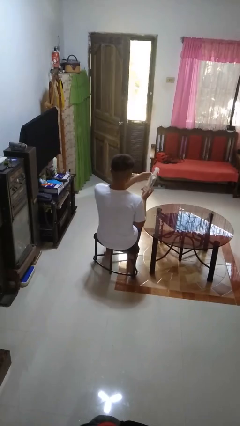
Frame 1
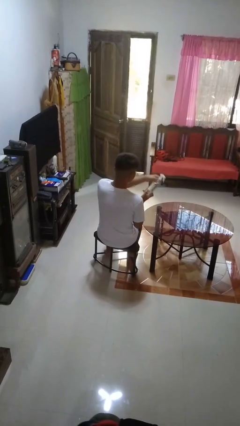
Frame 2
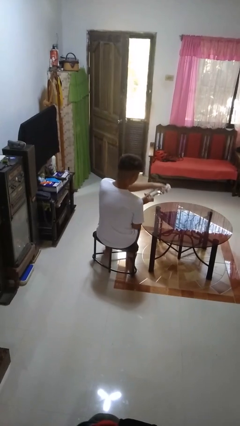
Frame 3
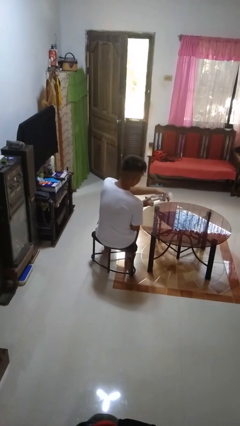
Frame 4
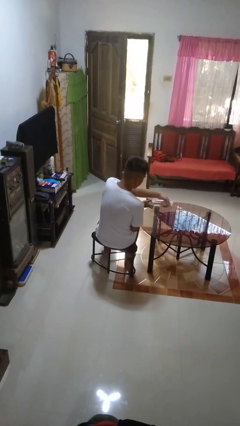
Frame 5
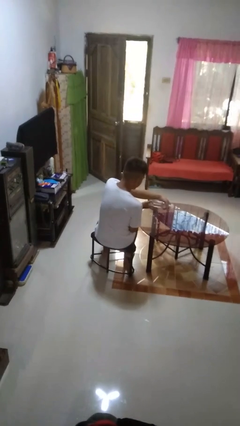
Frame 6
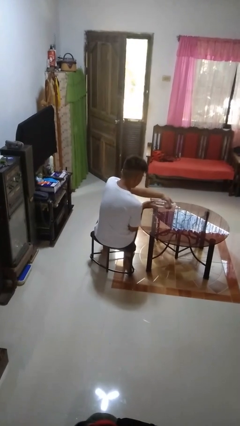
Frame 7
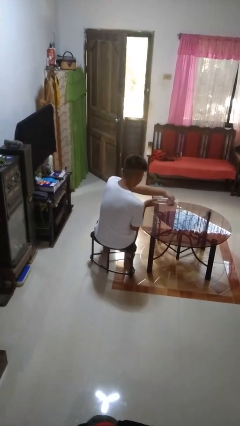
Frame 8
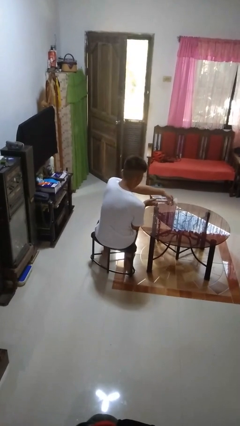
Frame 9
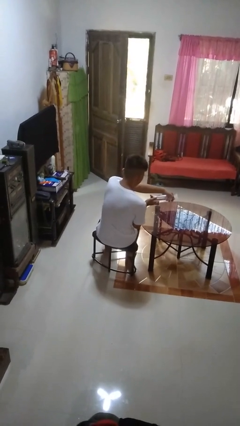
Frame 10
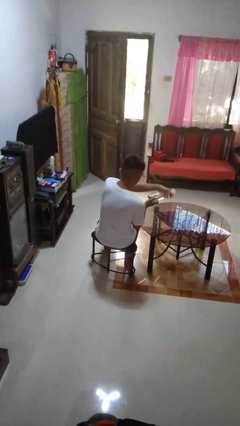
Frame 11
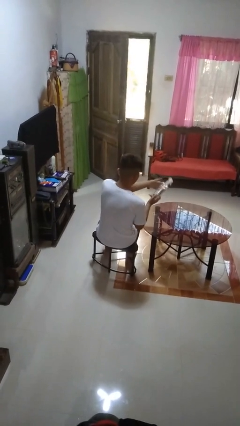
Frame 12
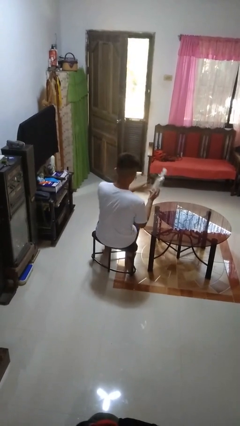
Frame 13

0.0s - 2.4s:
person sprays from bottle

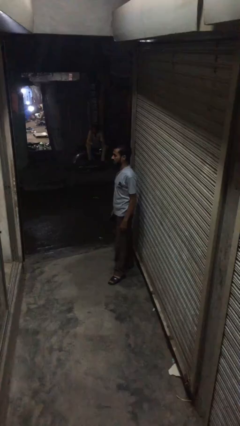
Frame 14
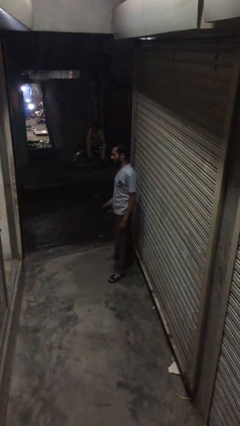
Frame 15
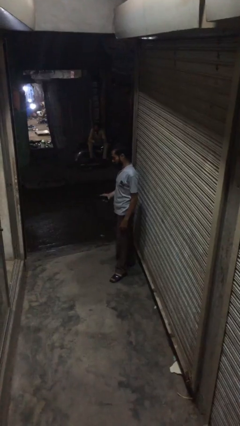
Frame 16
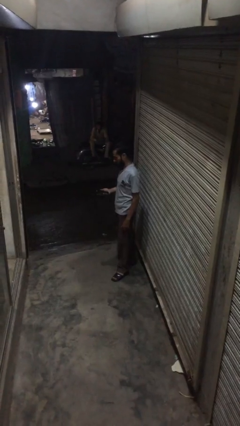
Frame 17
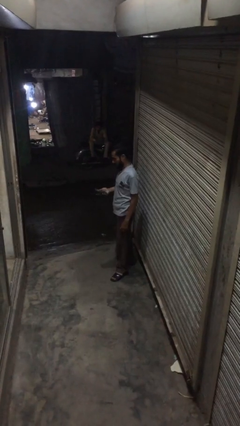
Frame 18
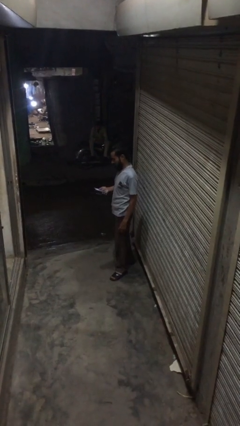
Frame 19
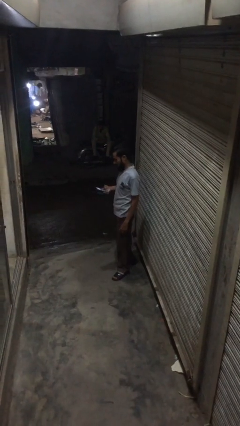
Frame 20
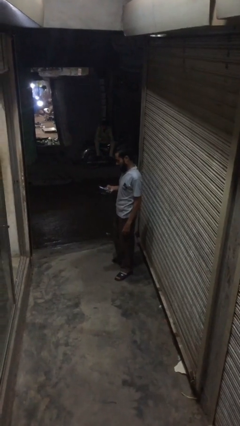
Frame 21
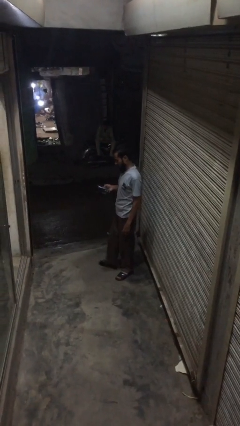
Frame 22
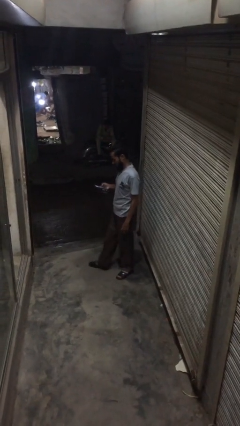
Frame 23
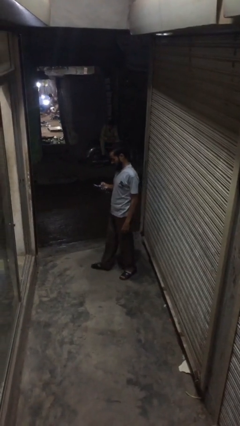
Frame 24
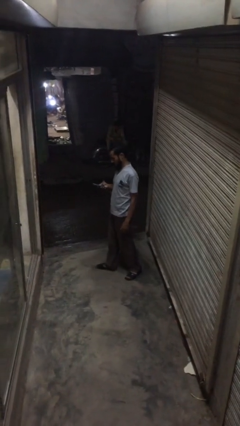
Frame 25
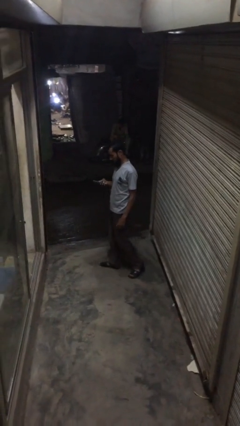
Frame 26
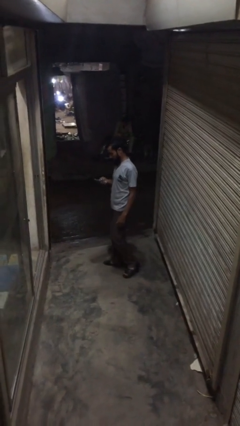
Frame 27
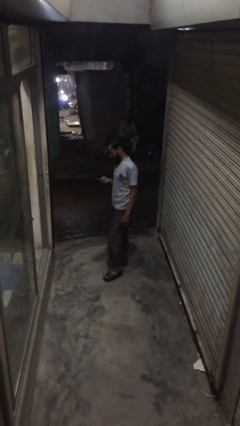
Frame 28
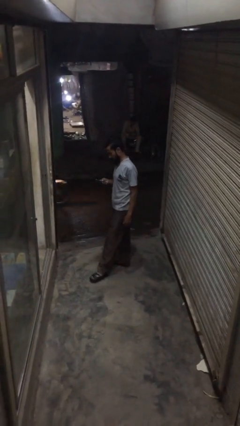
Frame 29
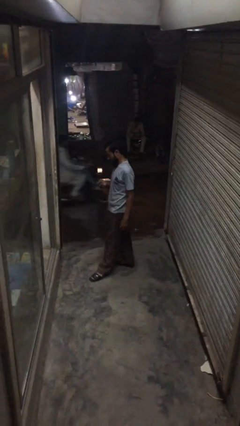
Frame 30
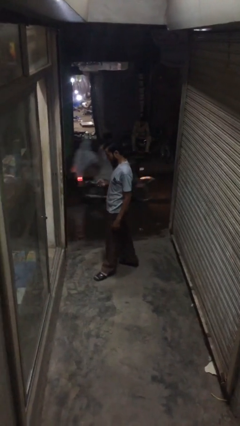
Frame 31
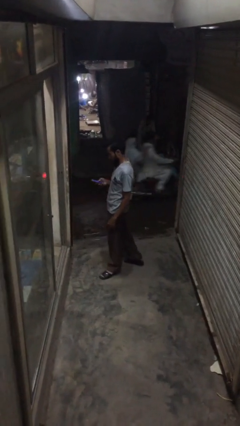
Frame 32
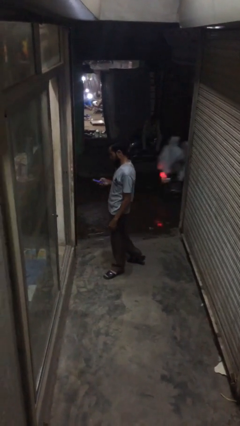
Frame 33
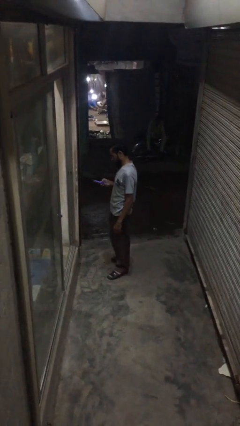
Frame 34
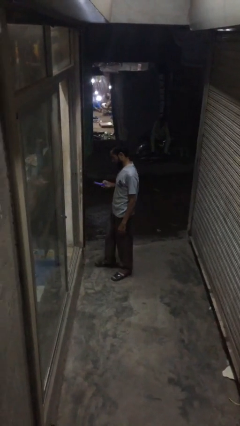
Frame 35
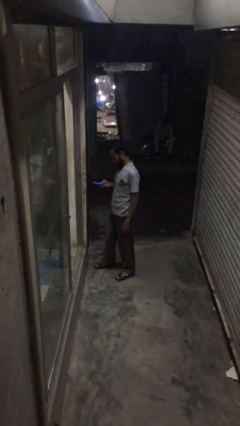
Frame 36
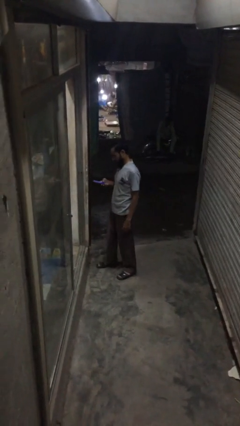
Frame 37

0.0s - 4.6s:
person texts on phone

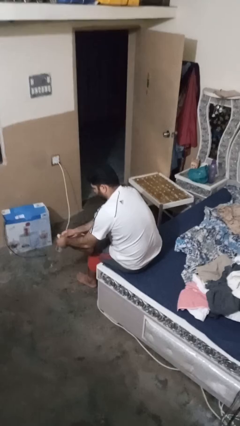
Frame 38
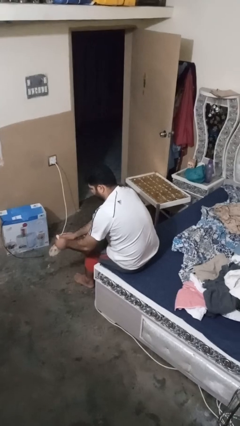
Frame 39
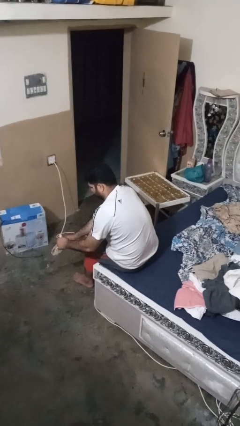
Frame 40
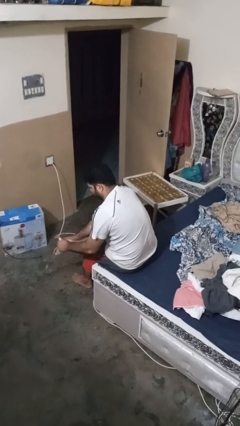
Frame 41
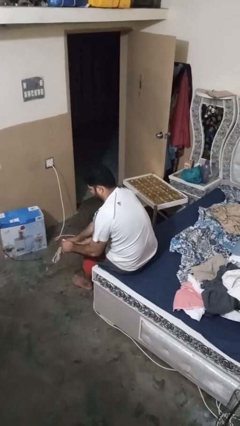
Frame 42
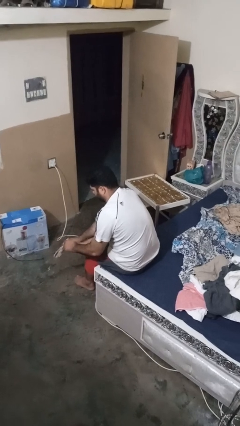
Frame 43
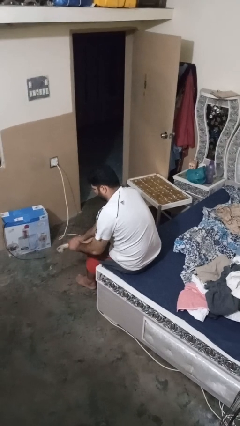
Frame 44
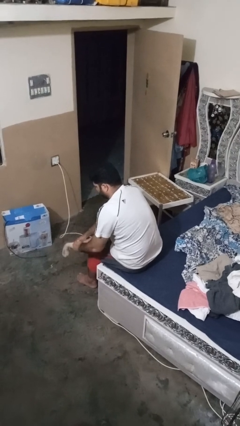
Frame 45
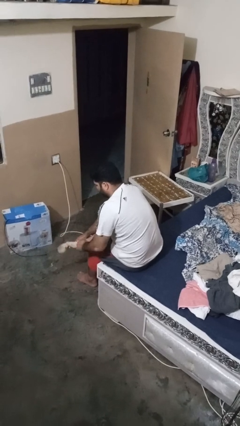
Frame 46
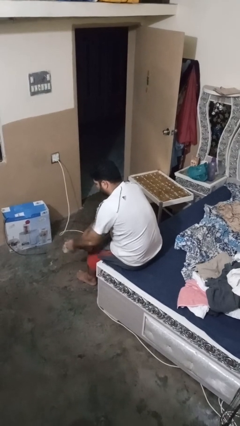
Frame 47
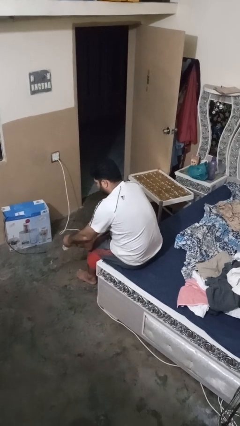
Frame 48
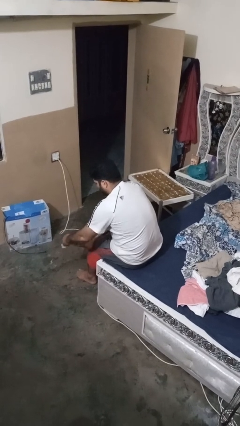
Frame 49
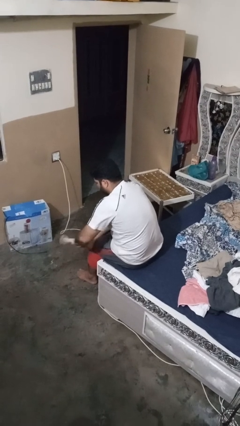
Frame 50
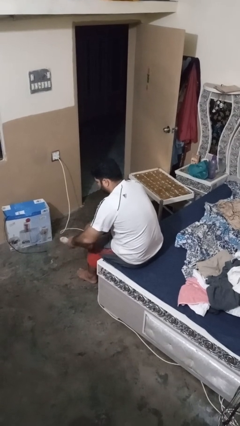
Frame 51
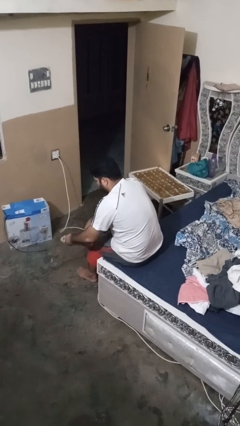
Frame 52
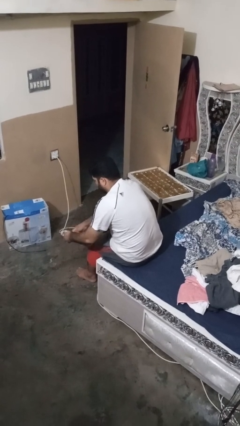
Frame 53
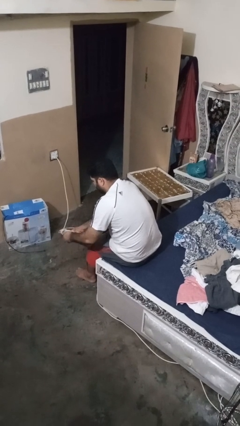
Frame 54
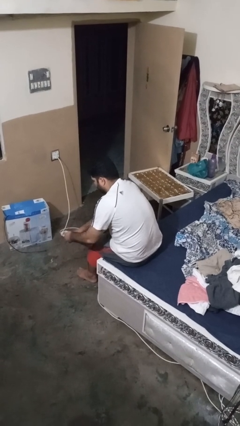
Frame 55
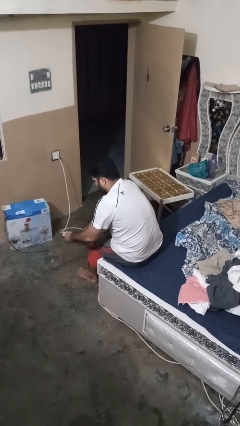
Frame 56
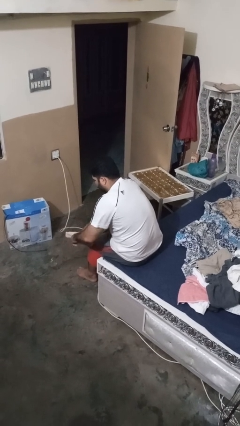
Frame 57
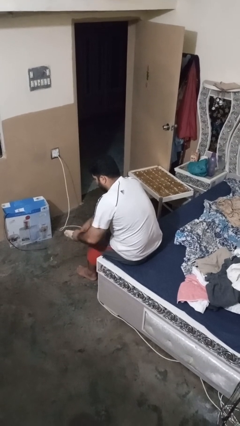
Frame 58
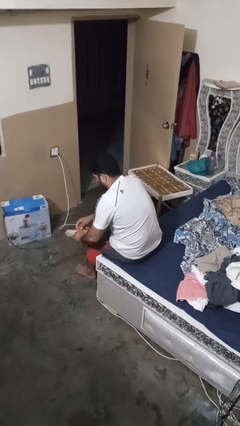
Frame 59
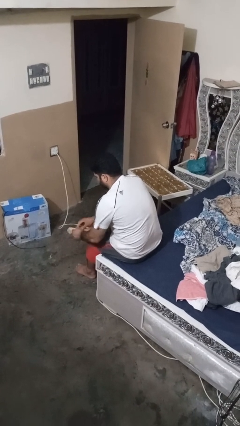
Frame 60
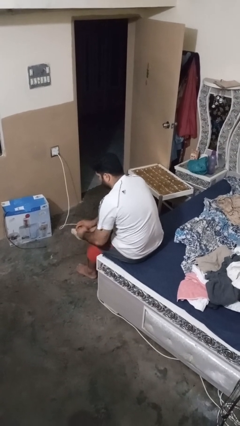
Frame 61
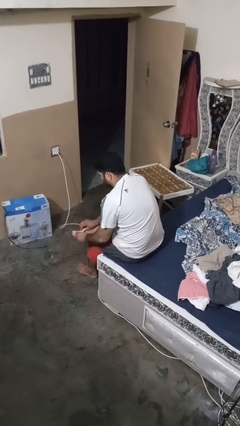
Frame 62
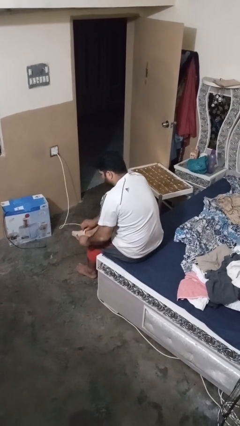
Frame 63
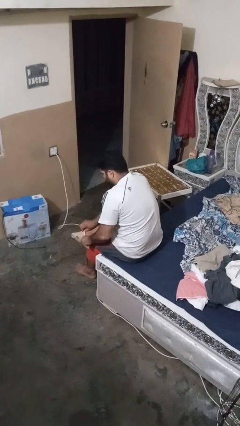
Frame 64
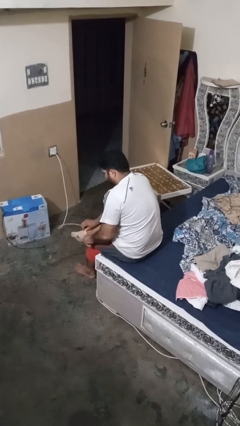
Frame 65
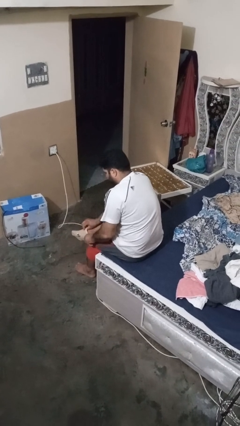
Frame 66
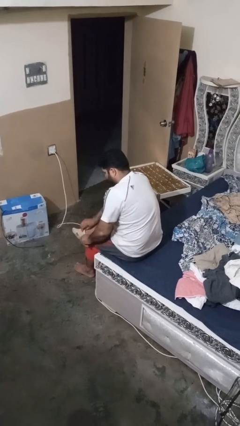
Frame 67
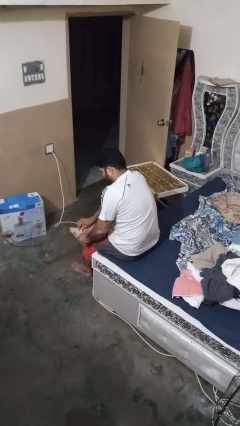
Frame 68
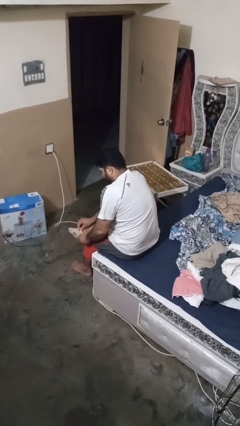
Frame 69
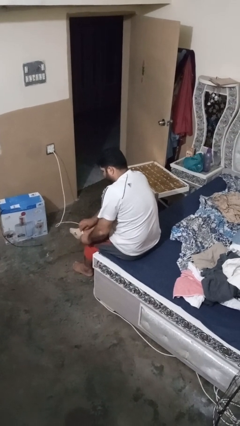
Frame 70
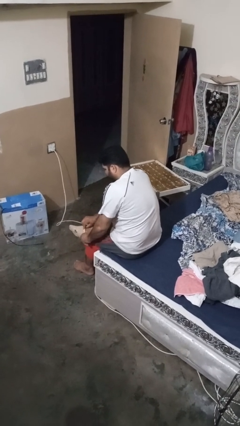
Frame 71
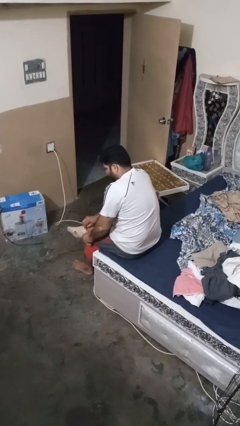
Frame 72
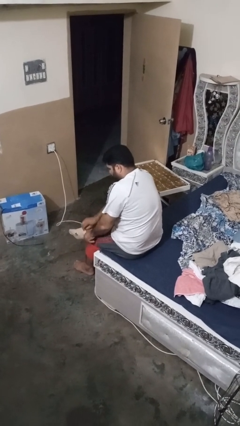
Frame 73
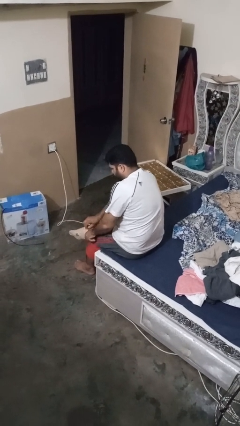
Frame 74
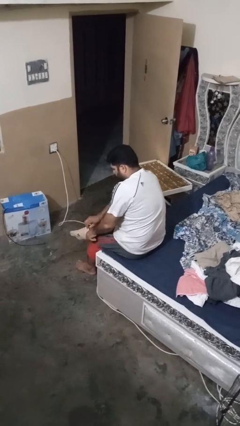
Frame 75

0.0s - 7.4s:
person puts on socks

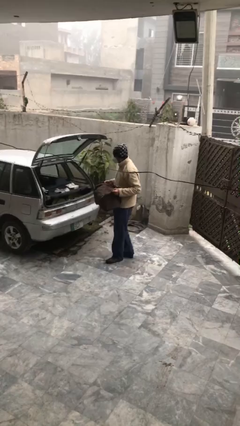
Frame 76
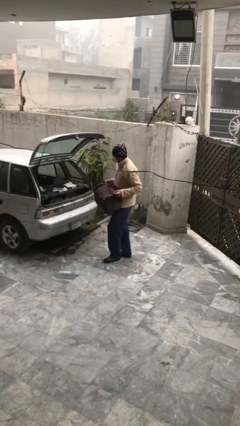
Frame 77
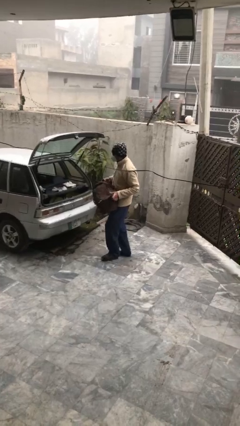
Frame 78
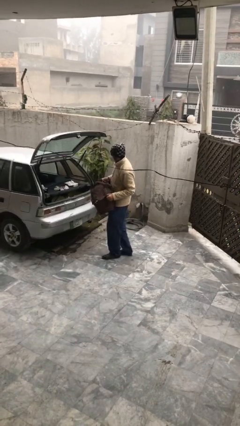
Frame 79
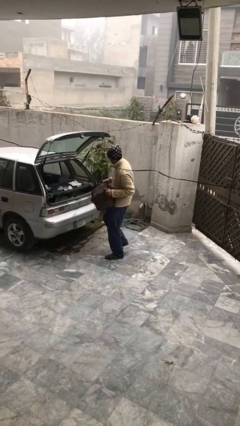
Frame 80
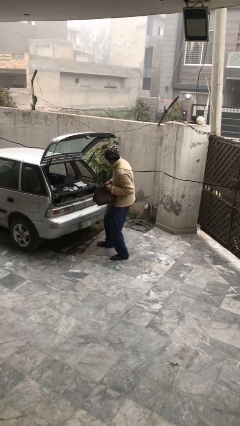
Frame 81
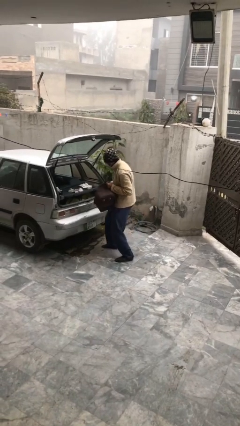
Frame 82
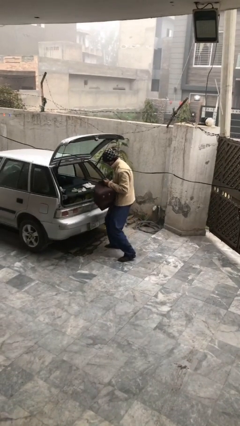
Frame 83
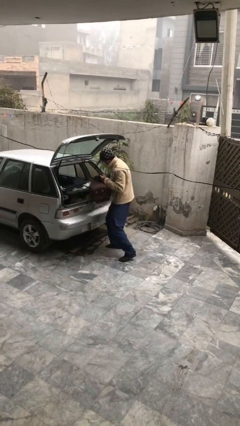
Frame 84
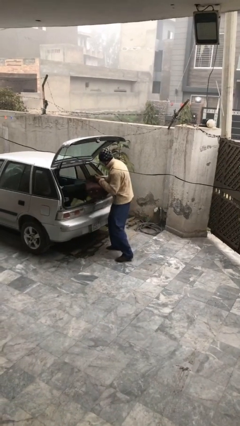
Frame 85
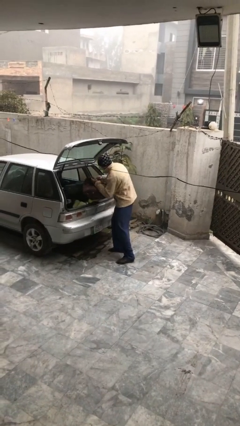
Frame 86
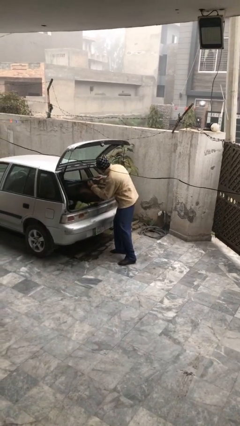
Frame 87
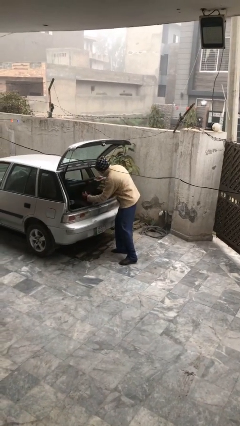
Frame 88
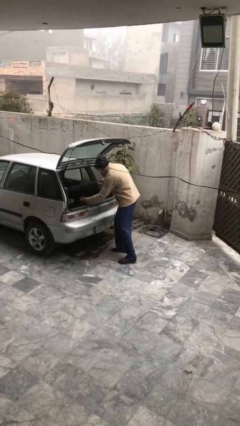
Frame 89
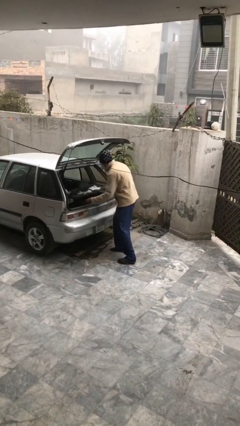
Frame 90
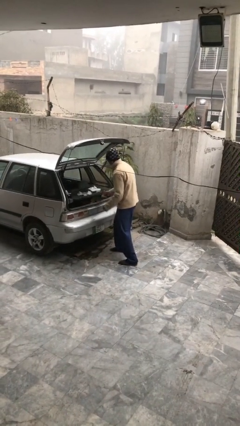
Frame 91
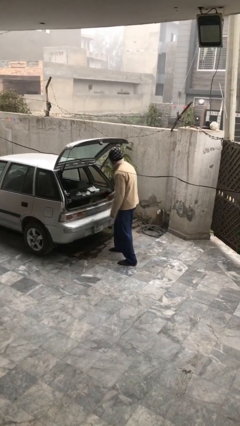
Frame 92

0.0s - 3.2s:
person loads car
